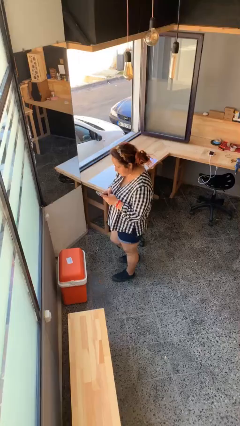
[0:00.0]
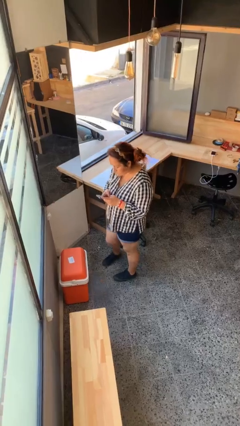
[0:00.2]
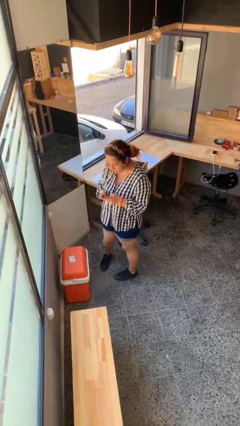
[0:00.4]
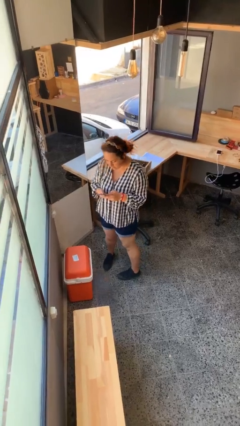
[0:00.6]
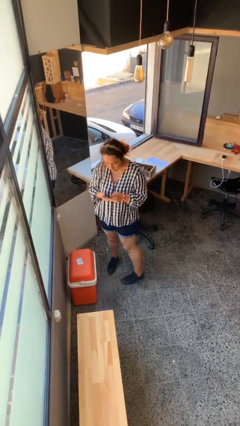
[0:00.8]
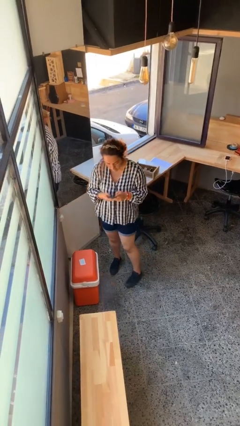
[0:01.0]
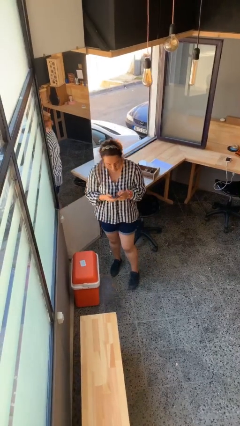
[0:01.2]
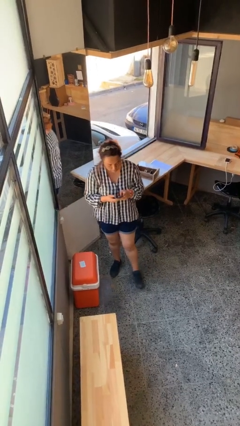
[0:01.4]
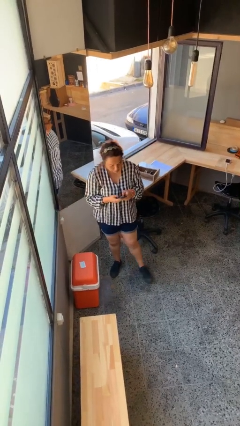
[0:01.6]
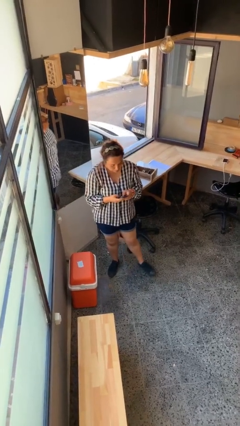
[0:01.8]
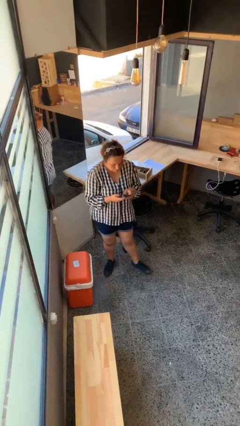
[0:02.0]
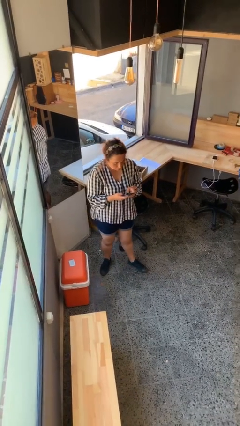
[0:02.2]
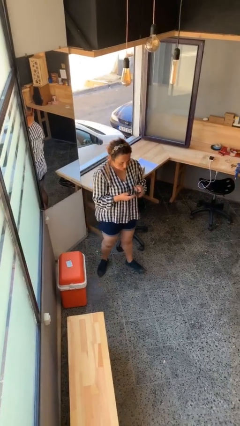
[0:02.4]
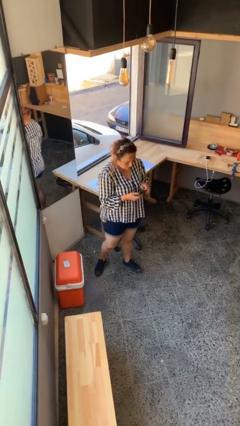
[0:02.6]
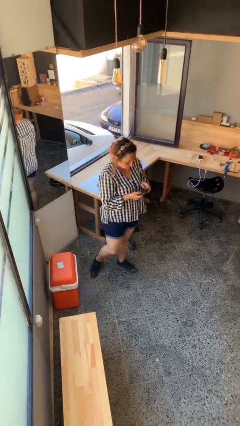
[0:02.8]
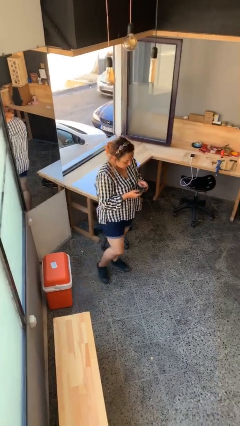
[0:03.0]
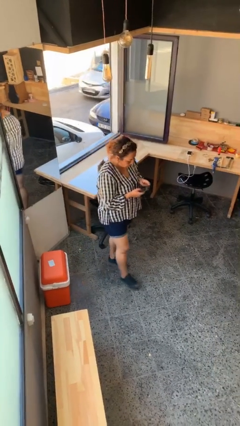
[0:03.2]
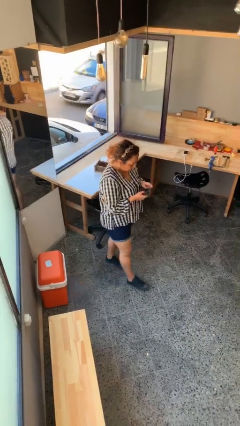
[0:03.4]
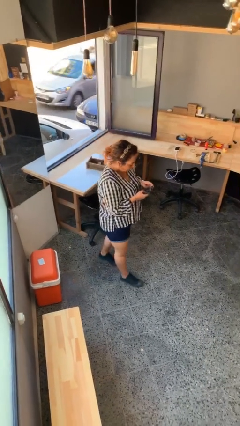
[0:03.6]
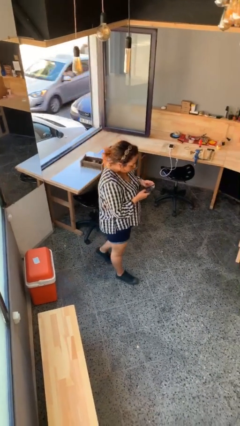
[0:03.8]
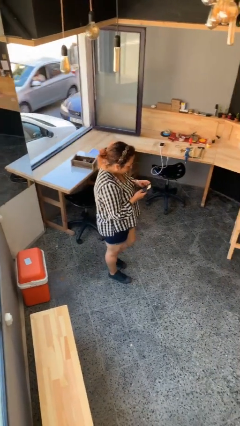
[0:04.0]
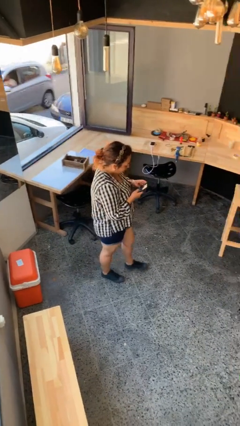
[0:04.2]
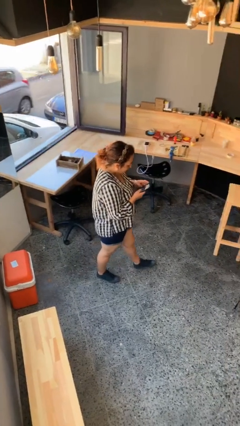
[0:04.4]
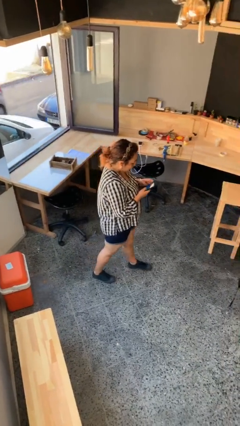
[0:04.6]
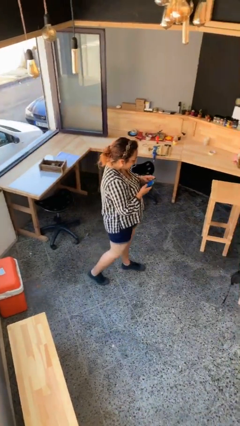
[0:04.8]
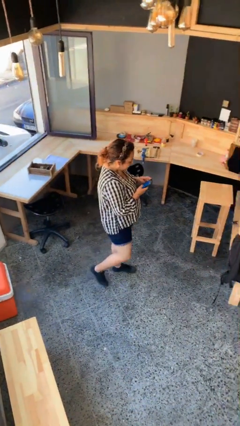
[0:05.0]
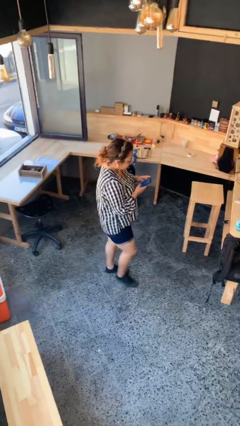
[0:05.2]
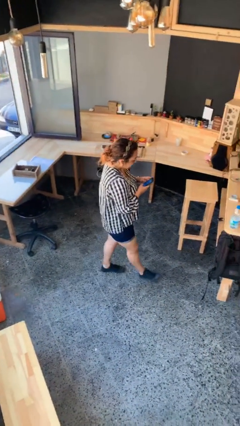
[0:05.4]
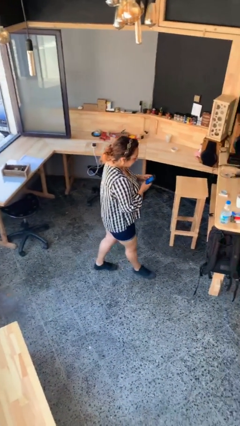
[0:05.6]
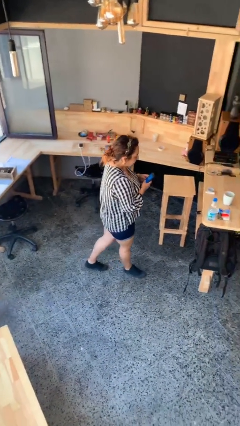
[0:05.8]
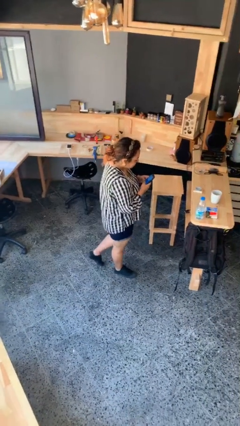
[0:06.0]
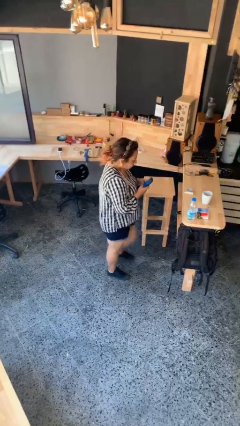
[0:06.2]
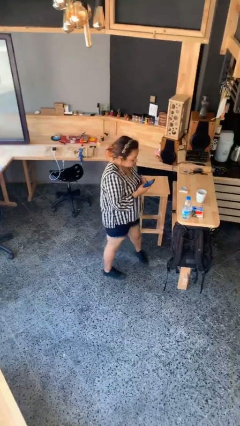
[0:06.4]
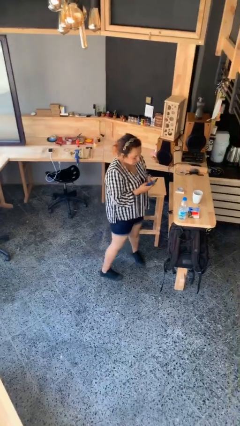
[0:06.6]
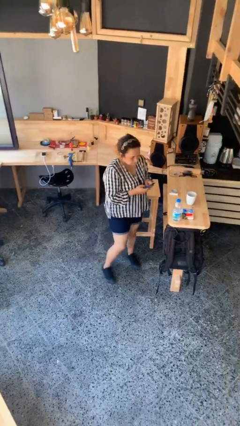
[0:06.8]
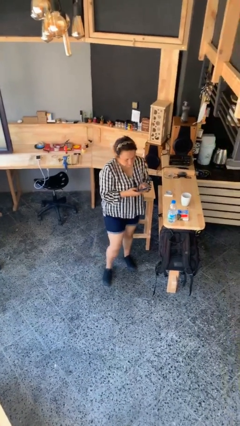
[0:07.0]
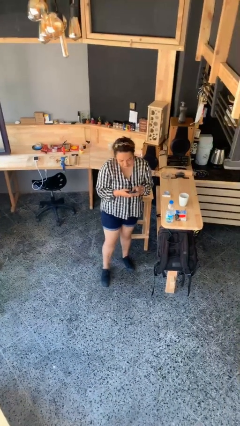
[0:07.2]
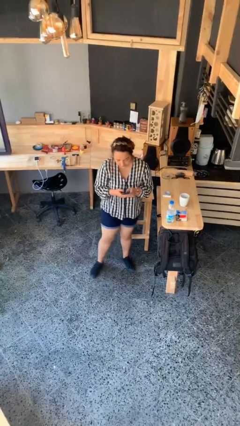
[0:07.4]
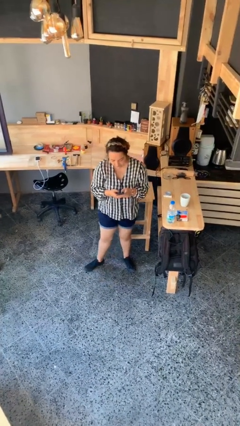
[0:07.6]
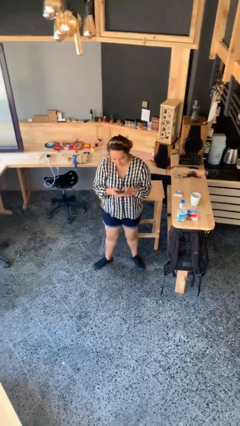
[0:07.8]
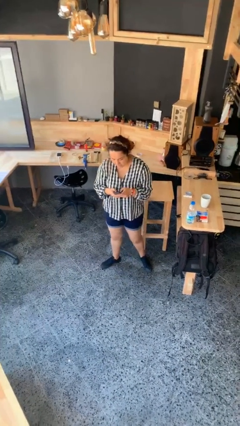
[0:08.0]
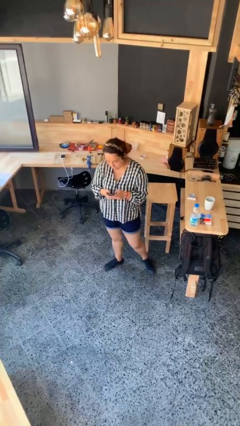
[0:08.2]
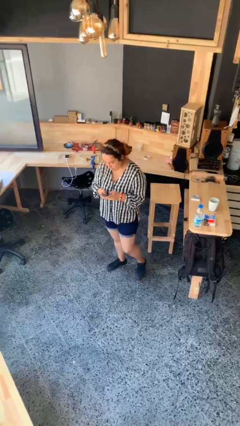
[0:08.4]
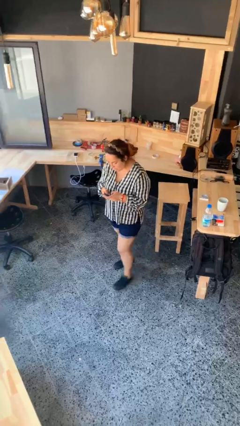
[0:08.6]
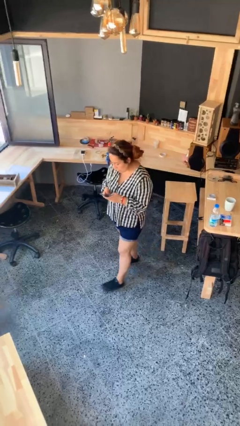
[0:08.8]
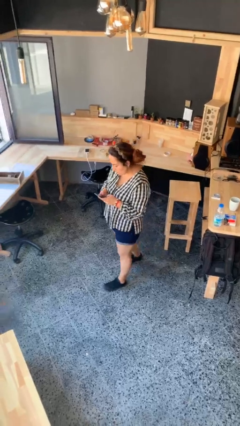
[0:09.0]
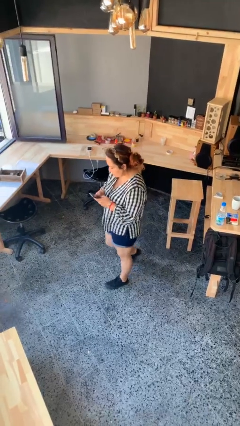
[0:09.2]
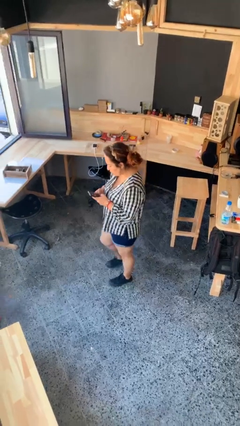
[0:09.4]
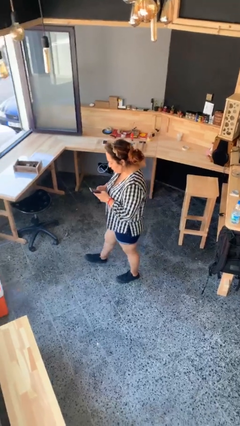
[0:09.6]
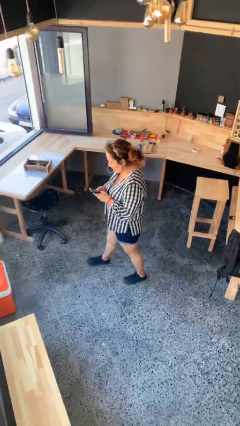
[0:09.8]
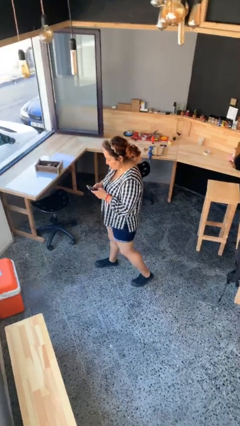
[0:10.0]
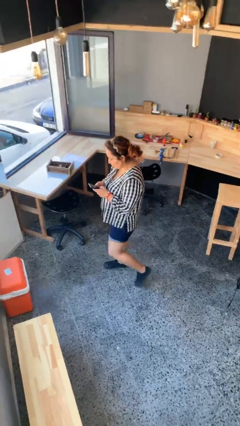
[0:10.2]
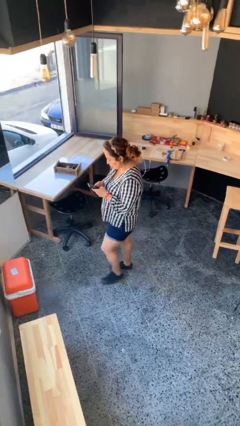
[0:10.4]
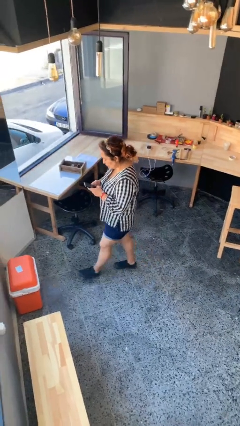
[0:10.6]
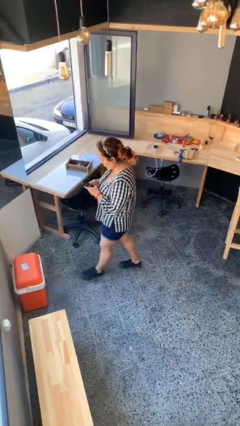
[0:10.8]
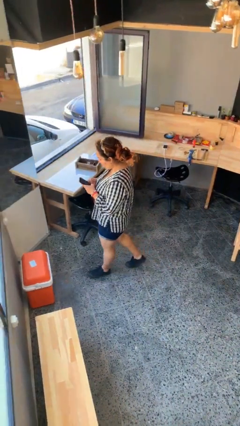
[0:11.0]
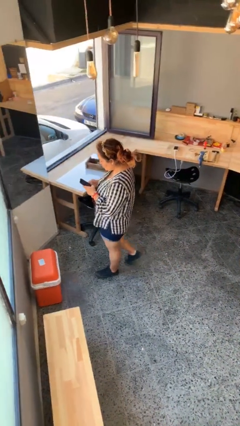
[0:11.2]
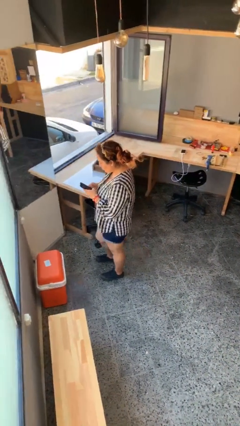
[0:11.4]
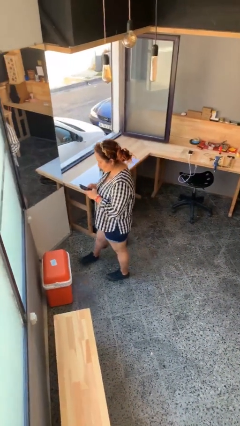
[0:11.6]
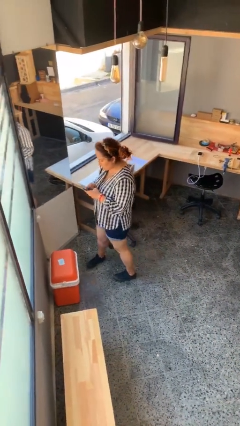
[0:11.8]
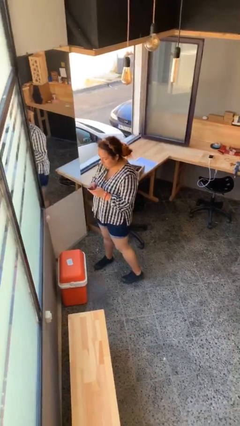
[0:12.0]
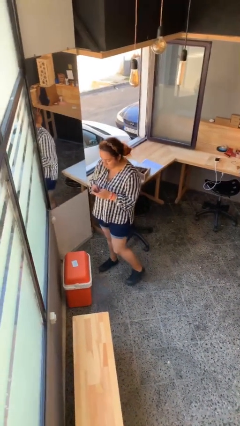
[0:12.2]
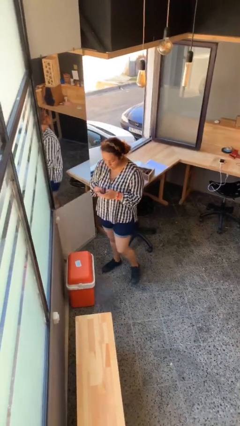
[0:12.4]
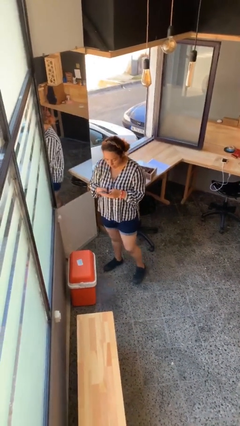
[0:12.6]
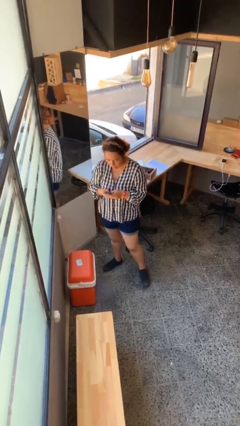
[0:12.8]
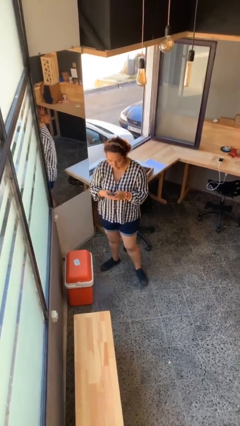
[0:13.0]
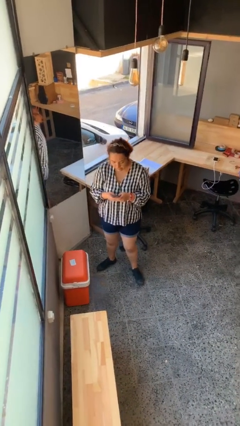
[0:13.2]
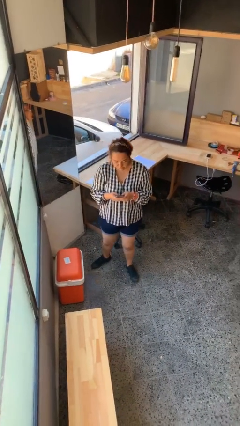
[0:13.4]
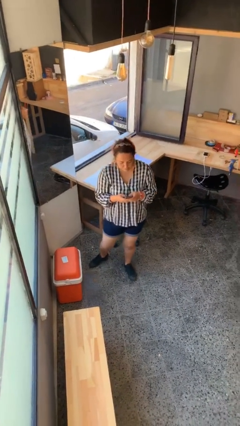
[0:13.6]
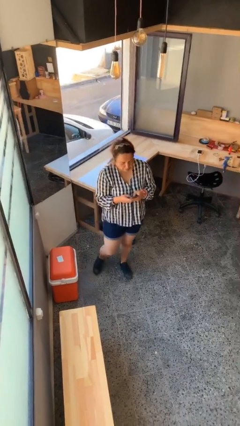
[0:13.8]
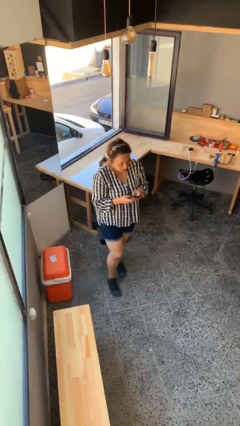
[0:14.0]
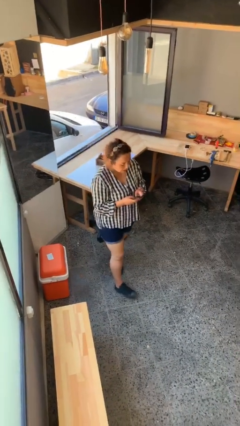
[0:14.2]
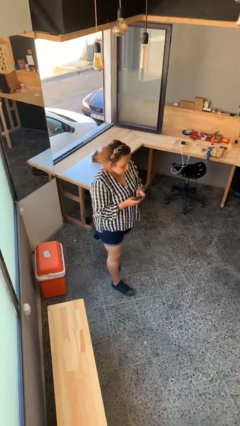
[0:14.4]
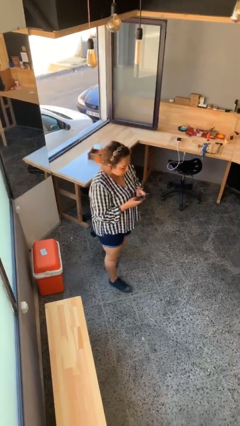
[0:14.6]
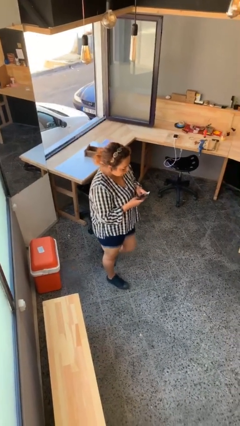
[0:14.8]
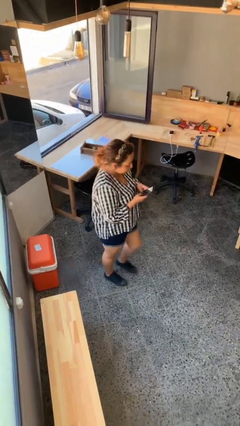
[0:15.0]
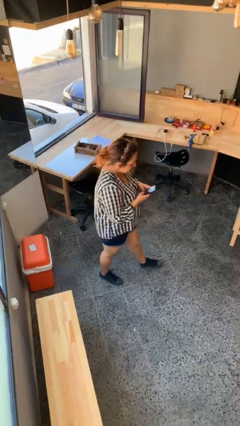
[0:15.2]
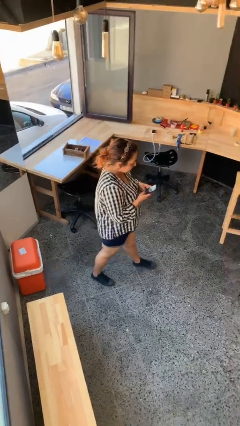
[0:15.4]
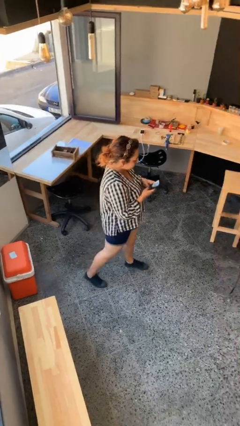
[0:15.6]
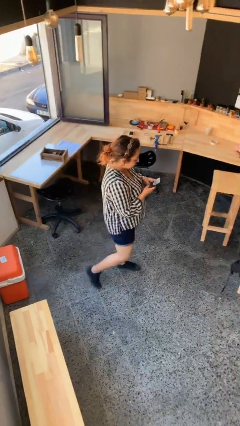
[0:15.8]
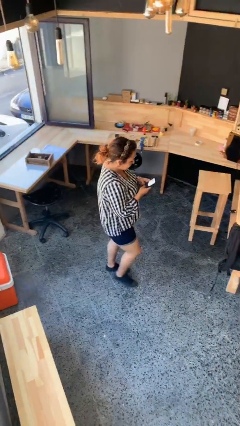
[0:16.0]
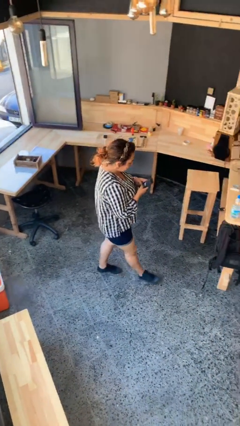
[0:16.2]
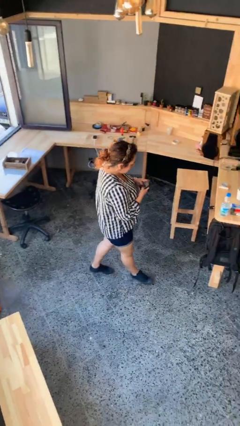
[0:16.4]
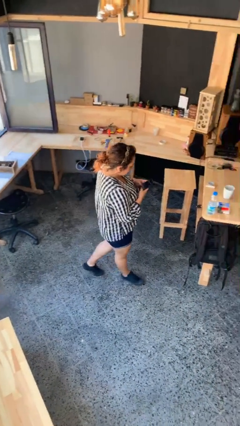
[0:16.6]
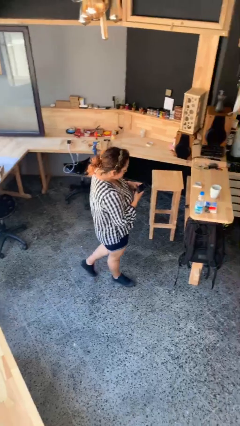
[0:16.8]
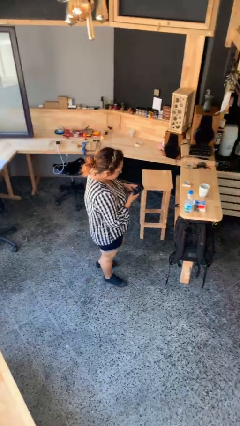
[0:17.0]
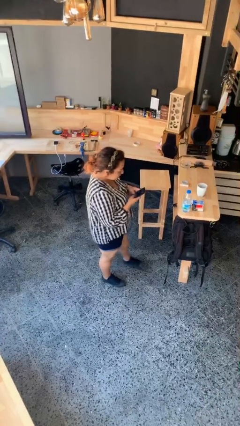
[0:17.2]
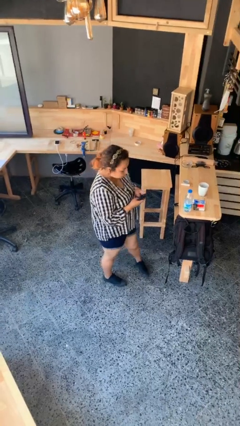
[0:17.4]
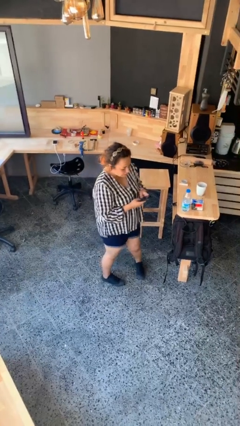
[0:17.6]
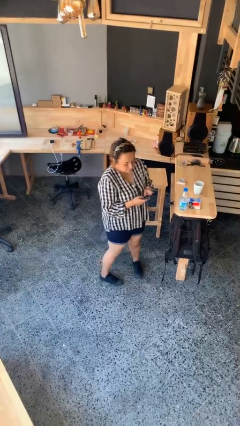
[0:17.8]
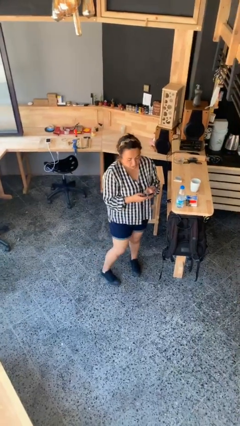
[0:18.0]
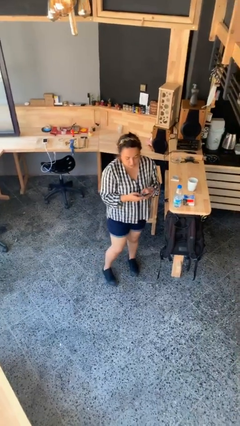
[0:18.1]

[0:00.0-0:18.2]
person texts on phone

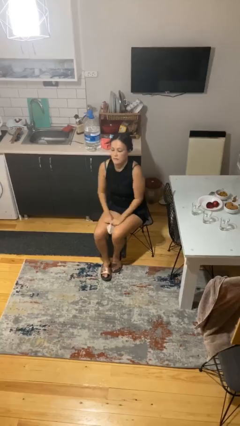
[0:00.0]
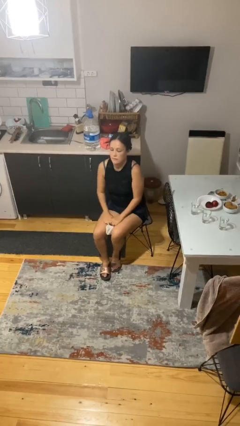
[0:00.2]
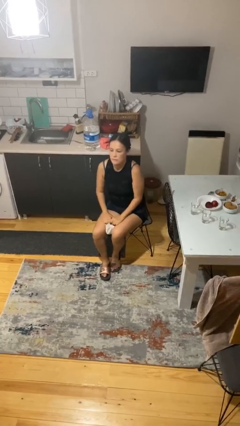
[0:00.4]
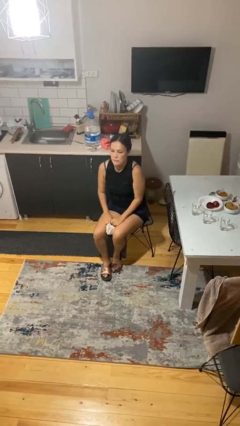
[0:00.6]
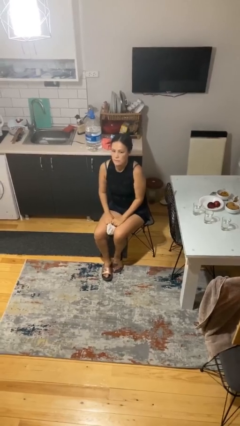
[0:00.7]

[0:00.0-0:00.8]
person takes off facemask
